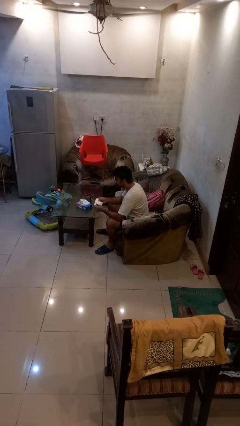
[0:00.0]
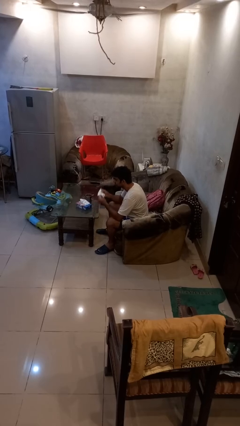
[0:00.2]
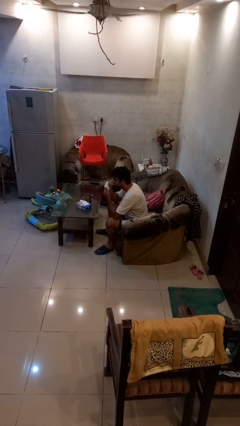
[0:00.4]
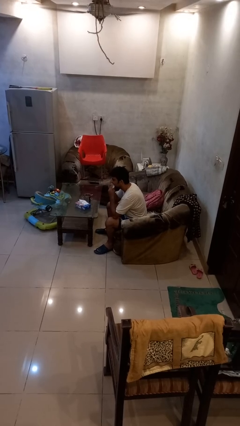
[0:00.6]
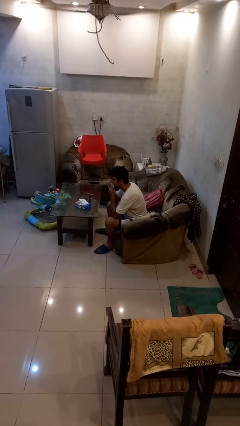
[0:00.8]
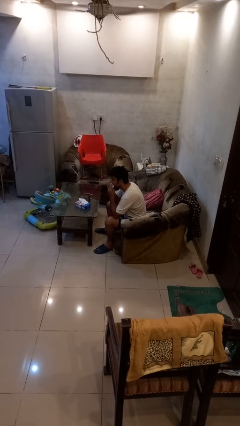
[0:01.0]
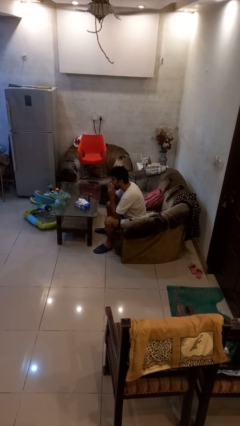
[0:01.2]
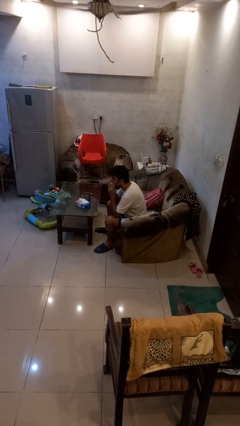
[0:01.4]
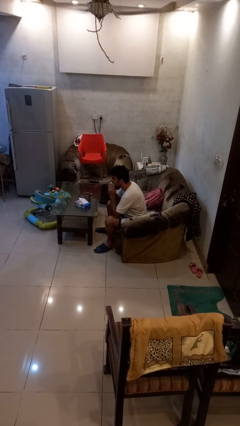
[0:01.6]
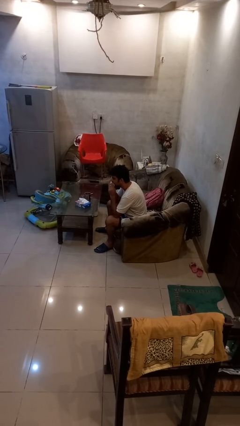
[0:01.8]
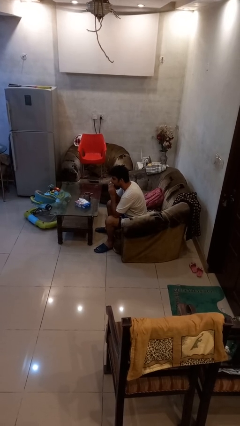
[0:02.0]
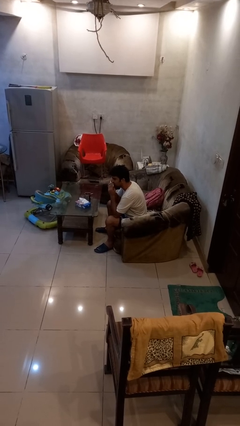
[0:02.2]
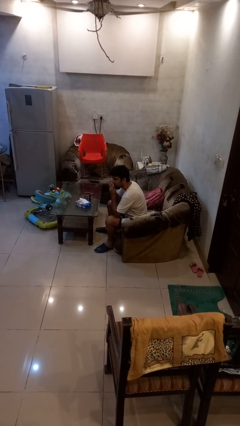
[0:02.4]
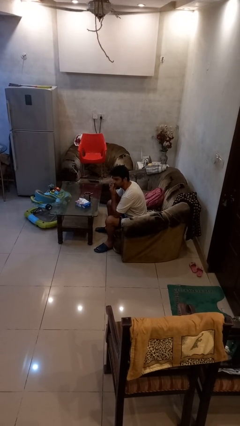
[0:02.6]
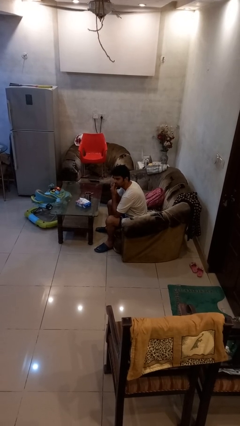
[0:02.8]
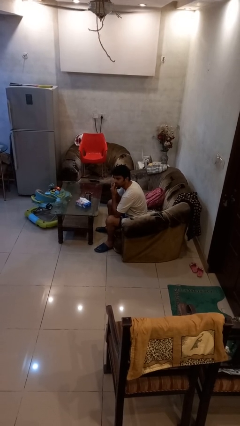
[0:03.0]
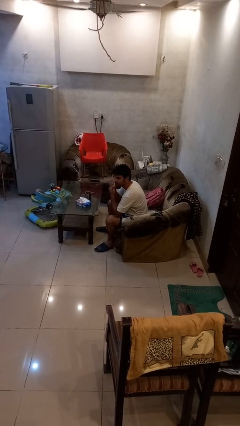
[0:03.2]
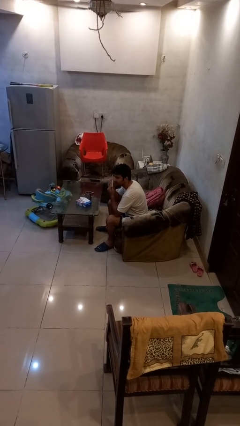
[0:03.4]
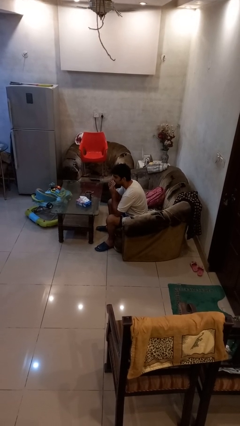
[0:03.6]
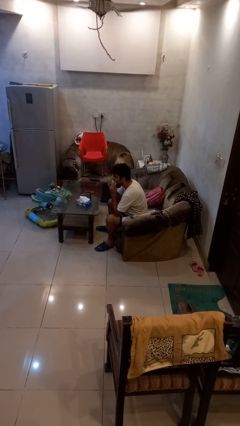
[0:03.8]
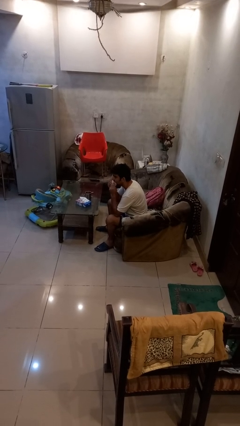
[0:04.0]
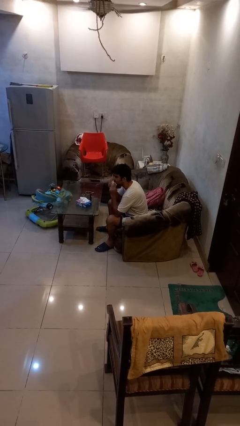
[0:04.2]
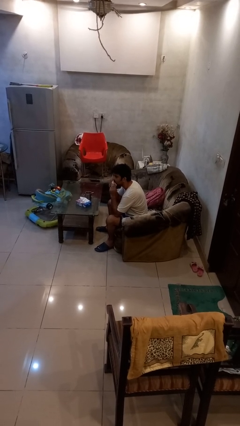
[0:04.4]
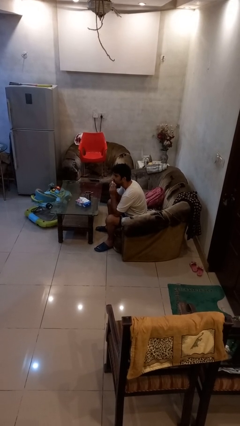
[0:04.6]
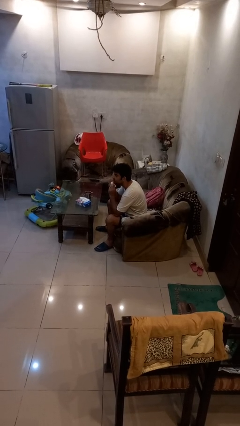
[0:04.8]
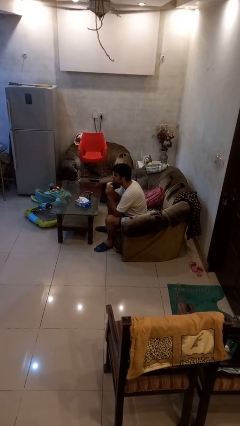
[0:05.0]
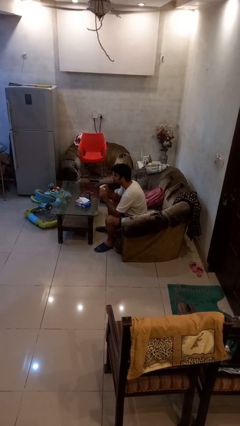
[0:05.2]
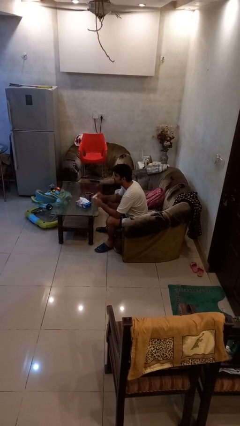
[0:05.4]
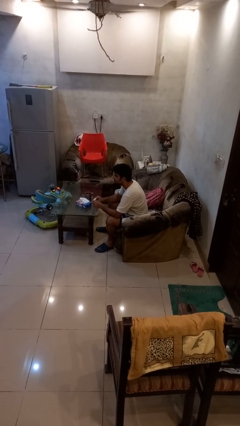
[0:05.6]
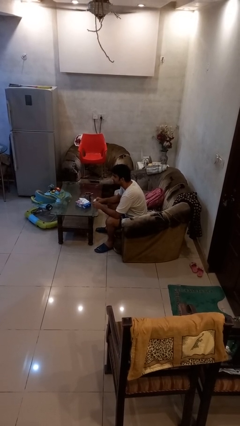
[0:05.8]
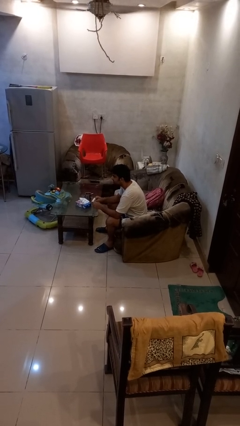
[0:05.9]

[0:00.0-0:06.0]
person wipes mouth with napkin

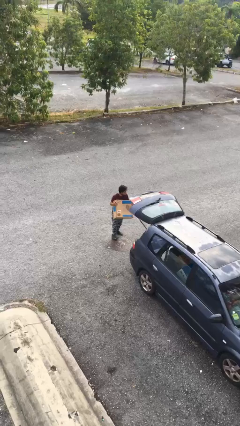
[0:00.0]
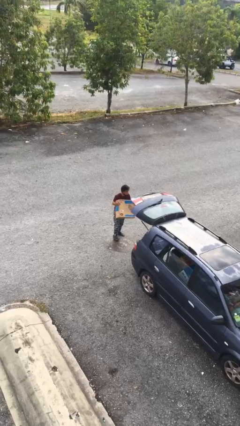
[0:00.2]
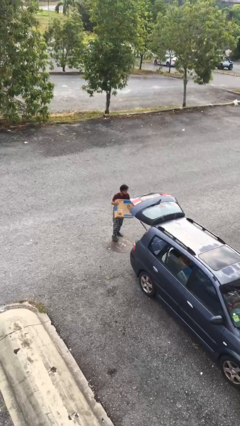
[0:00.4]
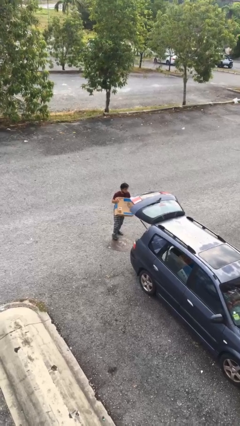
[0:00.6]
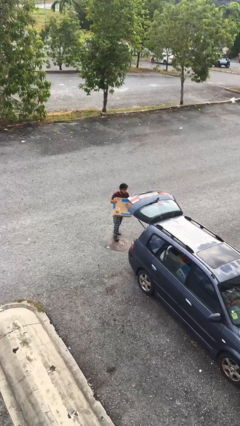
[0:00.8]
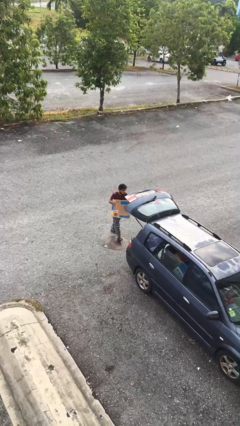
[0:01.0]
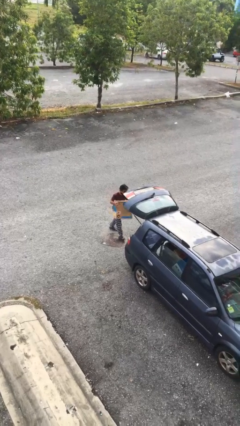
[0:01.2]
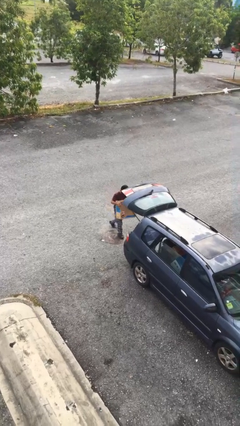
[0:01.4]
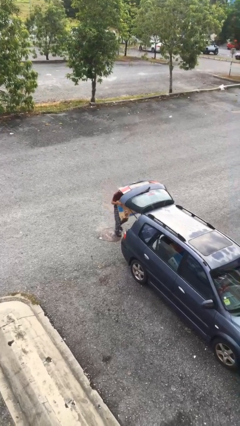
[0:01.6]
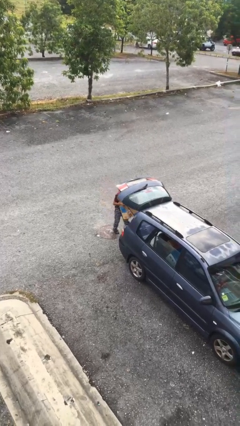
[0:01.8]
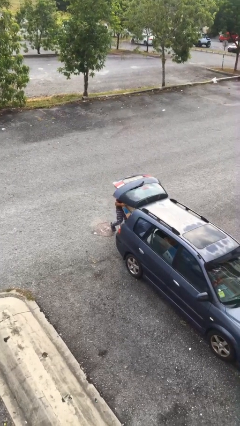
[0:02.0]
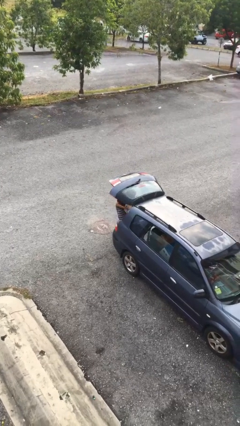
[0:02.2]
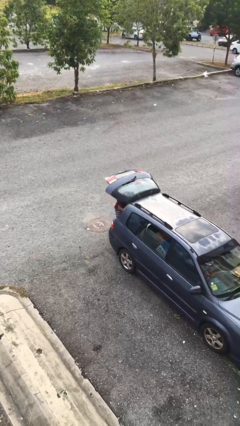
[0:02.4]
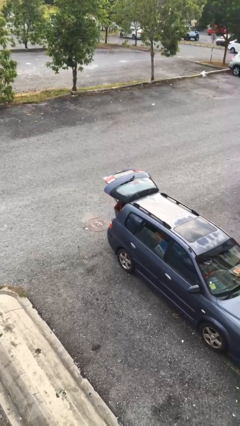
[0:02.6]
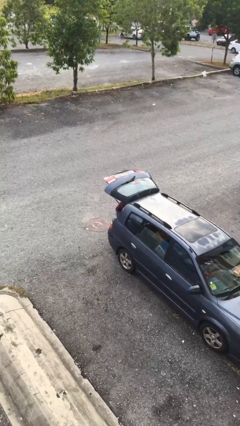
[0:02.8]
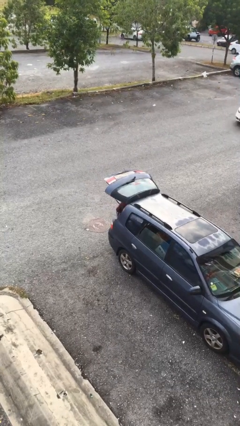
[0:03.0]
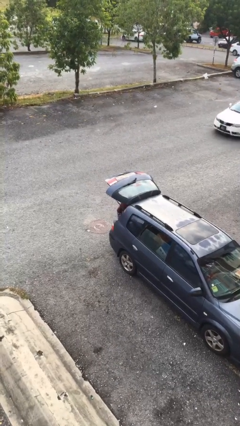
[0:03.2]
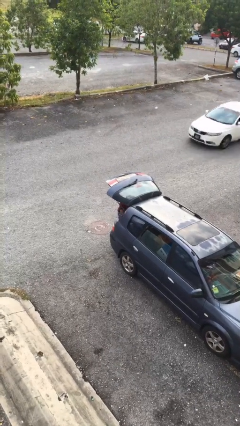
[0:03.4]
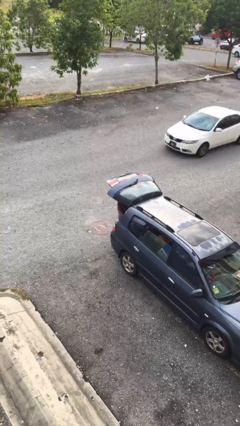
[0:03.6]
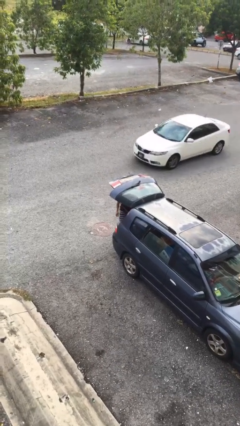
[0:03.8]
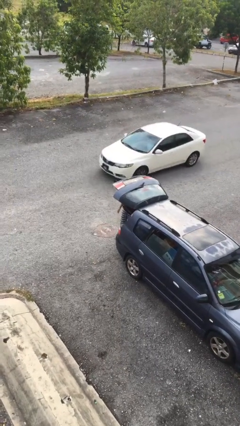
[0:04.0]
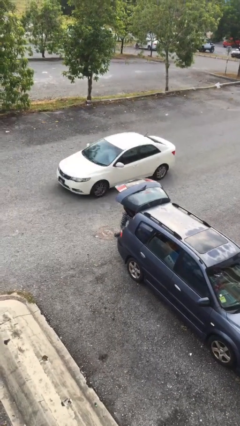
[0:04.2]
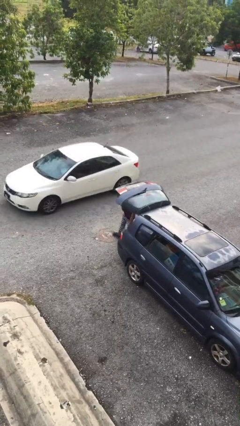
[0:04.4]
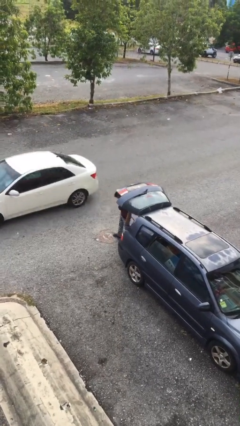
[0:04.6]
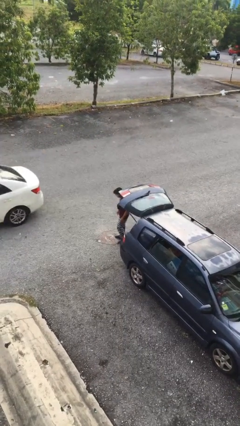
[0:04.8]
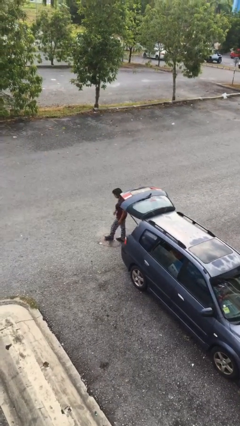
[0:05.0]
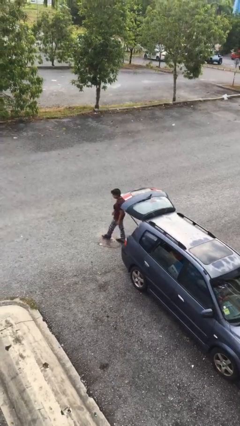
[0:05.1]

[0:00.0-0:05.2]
person loads car

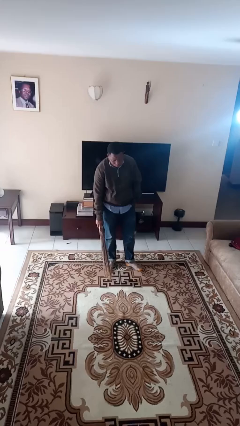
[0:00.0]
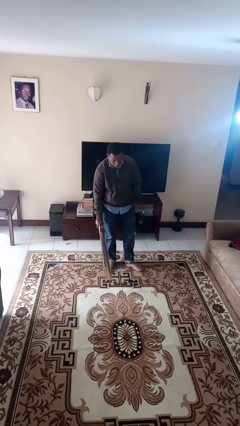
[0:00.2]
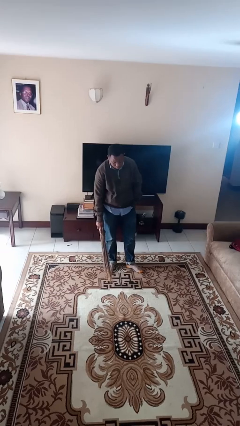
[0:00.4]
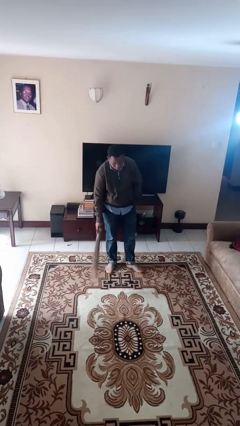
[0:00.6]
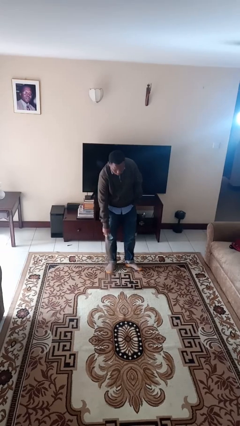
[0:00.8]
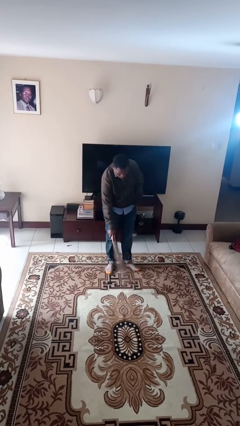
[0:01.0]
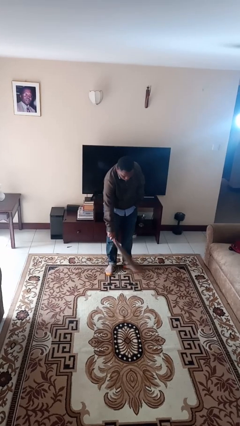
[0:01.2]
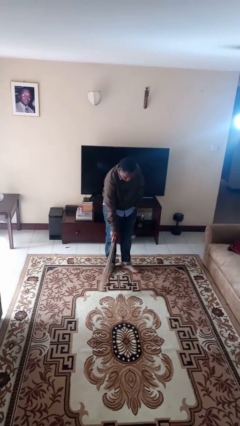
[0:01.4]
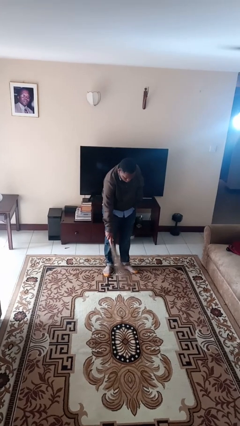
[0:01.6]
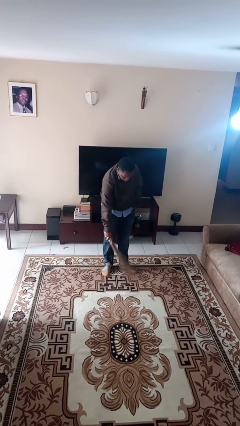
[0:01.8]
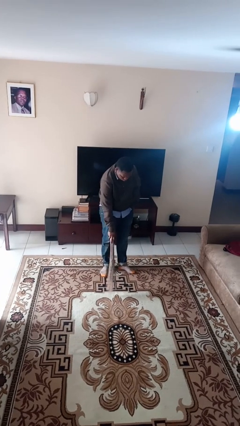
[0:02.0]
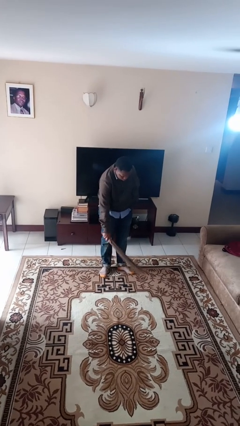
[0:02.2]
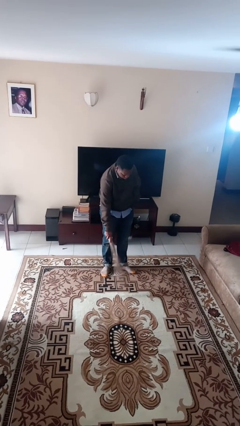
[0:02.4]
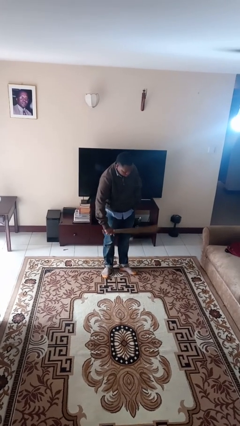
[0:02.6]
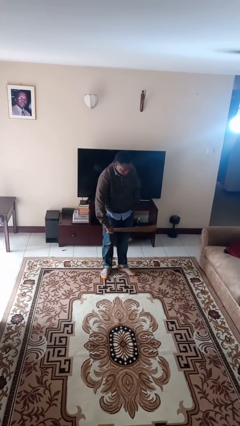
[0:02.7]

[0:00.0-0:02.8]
person sweeps floor

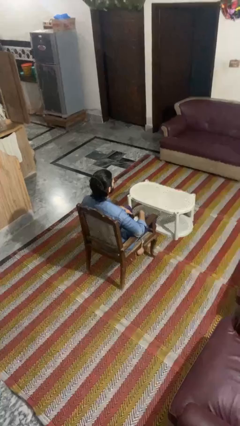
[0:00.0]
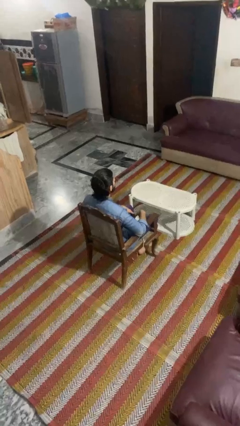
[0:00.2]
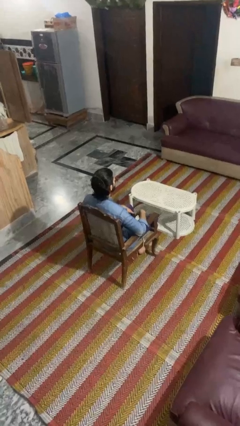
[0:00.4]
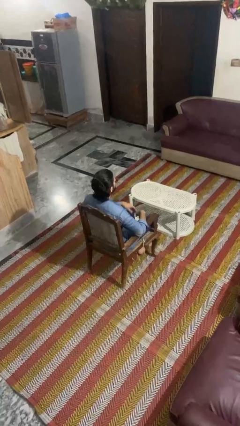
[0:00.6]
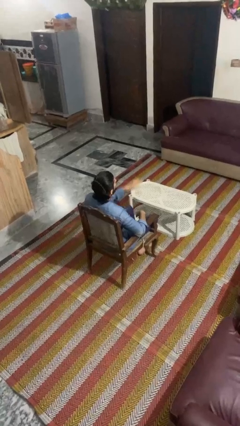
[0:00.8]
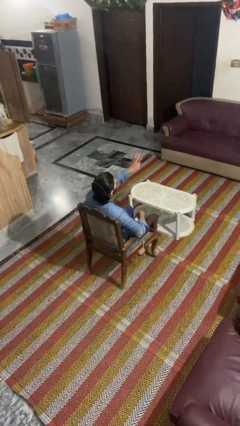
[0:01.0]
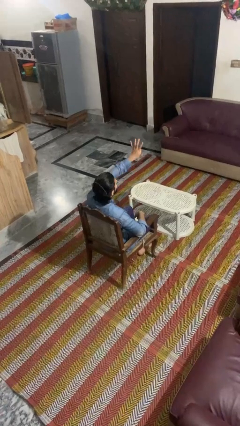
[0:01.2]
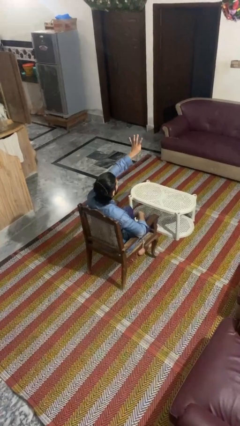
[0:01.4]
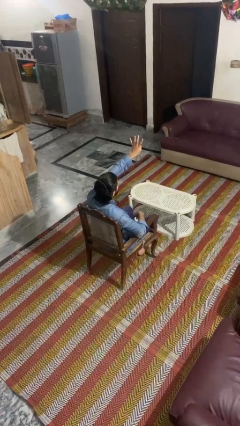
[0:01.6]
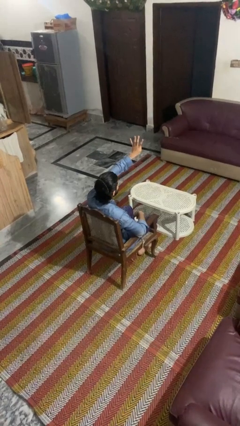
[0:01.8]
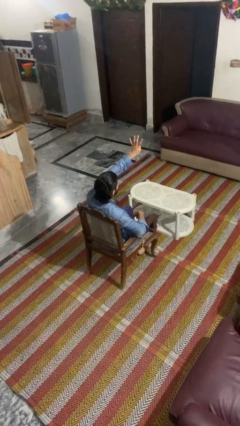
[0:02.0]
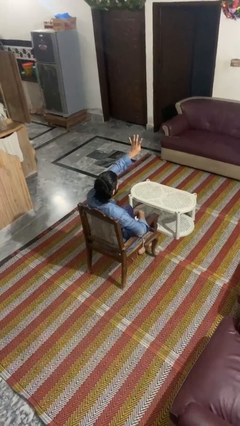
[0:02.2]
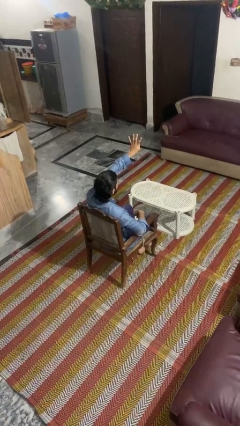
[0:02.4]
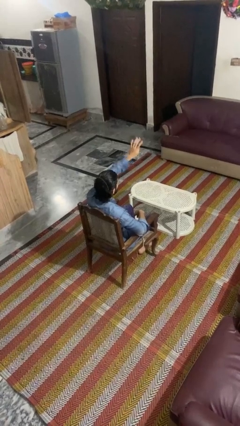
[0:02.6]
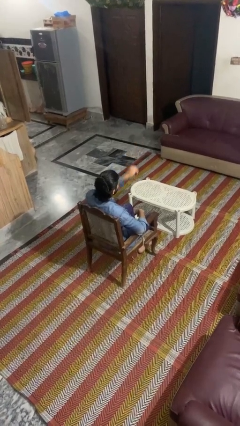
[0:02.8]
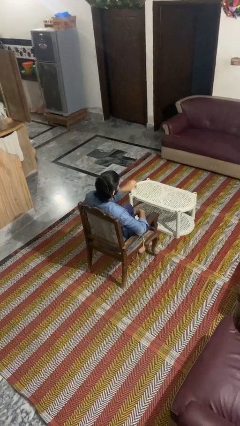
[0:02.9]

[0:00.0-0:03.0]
person gestures number four

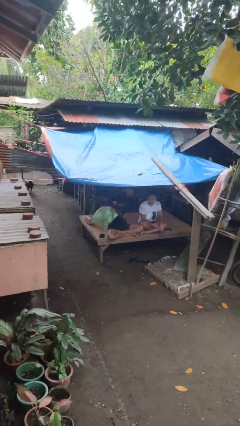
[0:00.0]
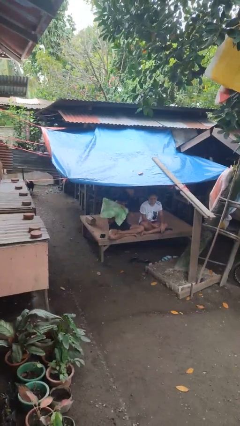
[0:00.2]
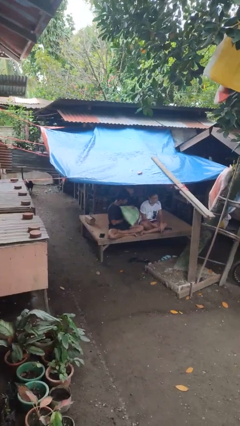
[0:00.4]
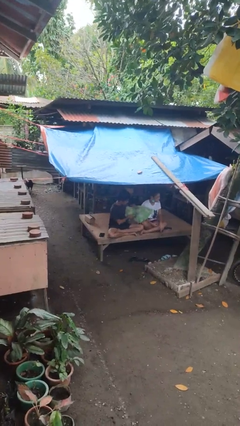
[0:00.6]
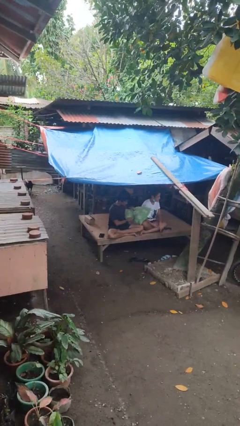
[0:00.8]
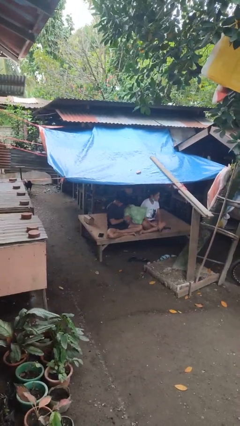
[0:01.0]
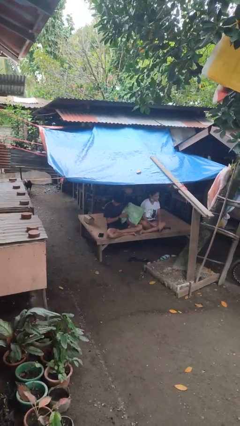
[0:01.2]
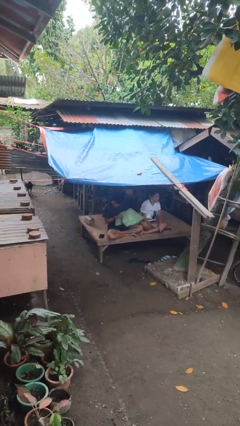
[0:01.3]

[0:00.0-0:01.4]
person hits person with pillow
